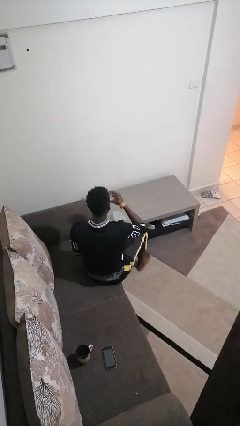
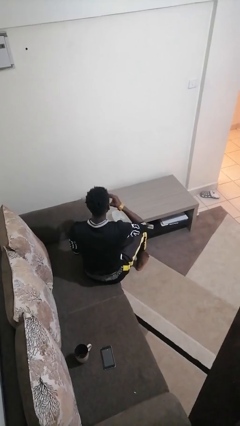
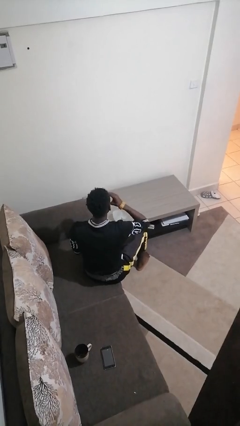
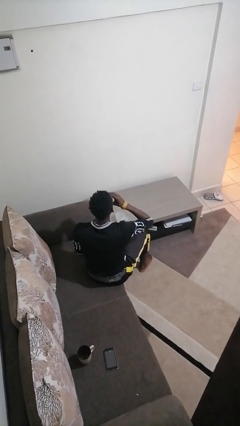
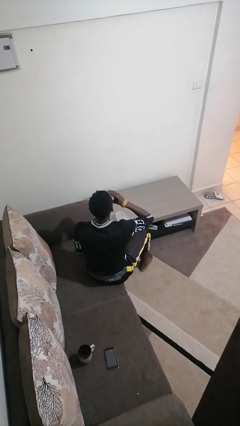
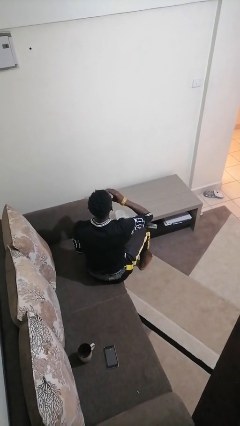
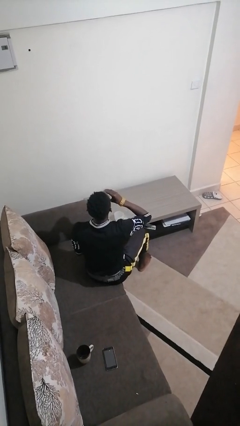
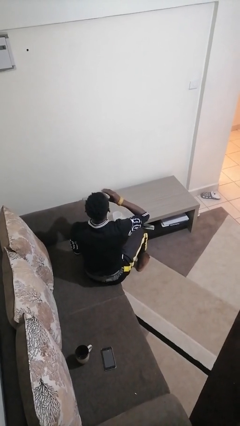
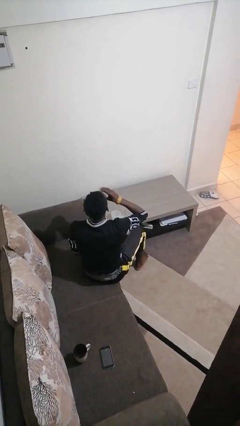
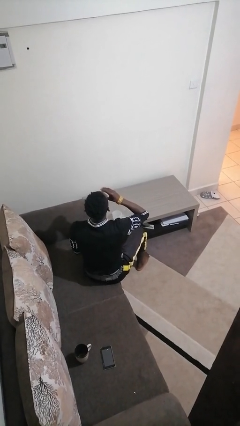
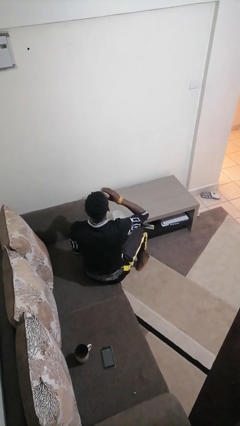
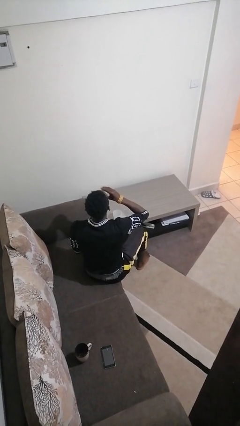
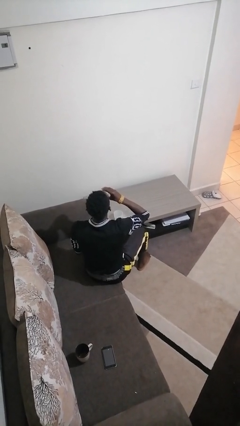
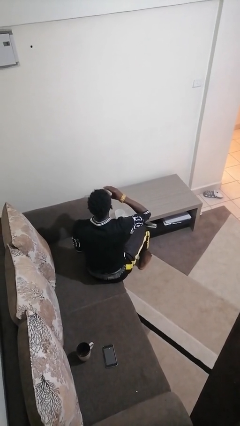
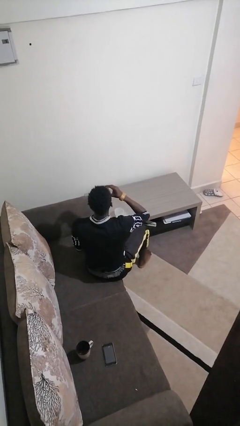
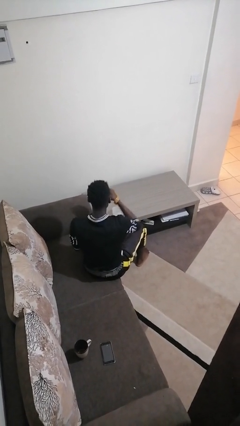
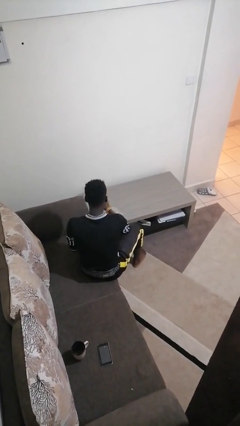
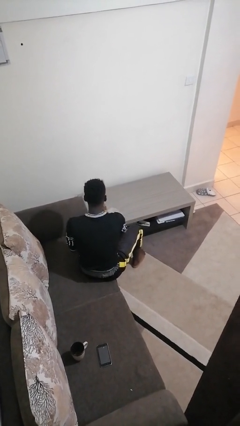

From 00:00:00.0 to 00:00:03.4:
person drinks from shotglass

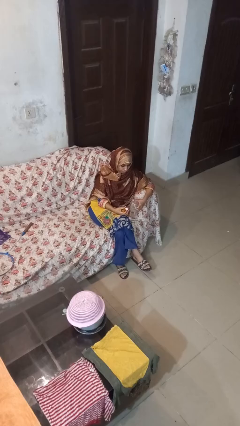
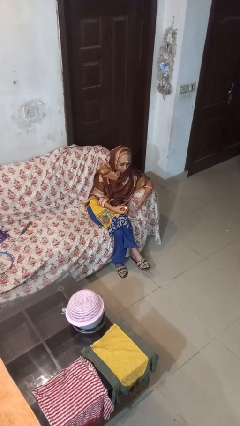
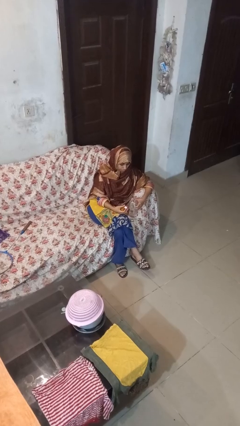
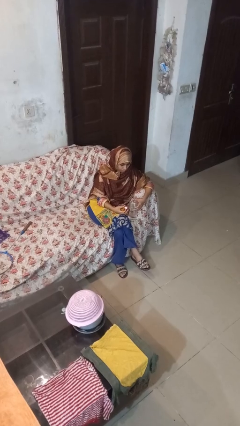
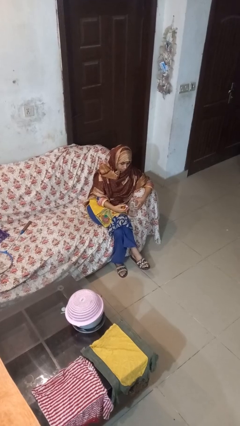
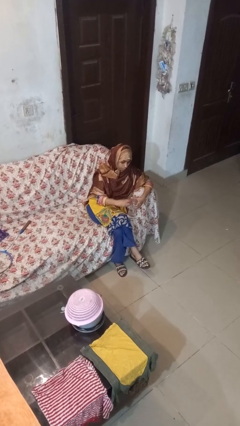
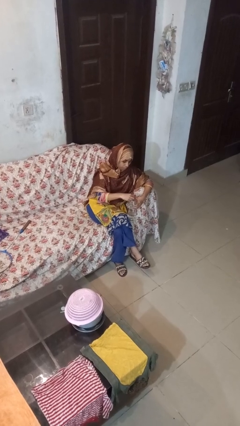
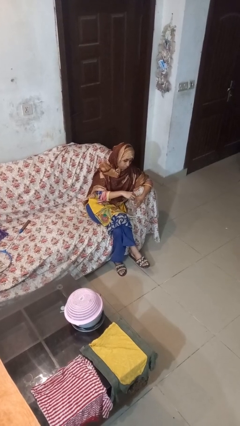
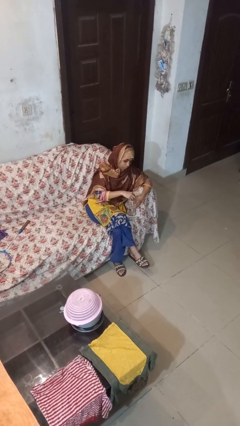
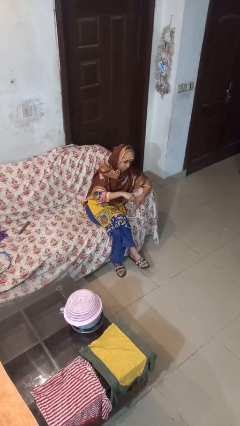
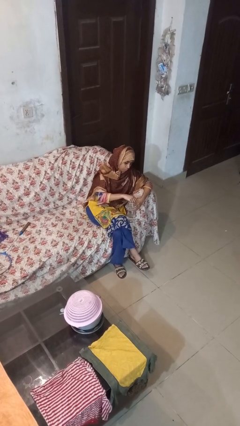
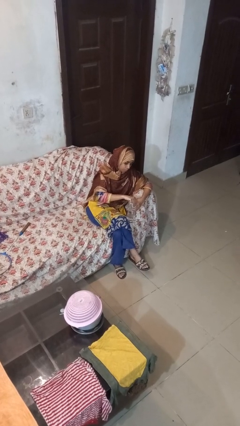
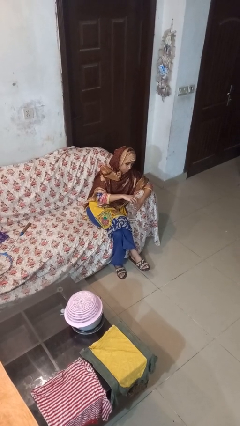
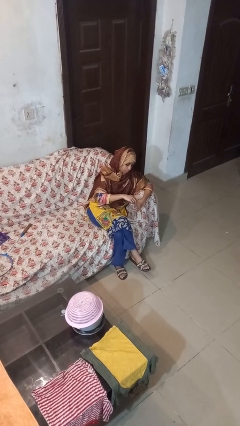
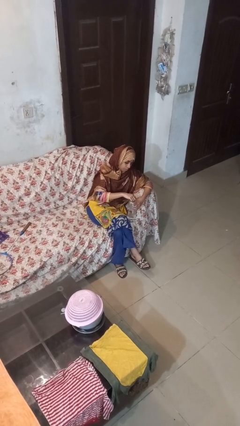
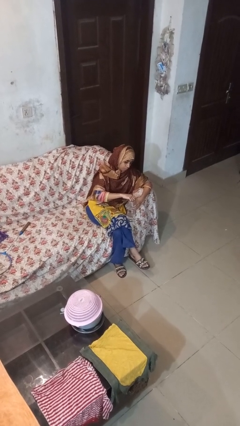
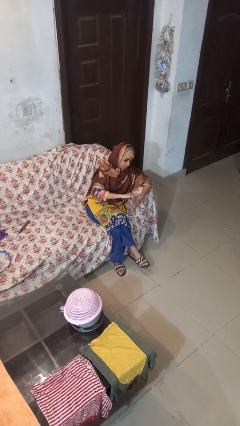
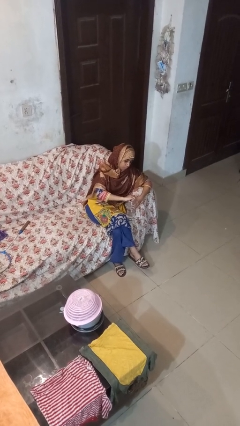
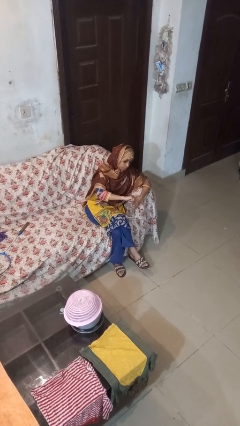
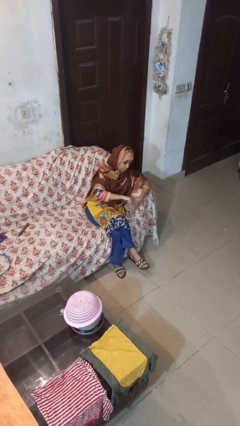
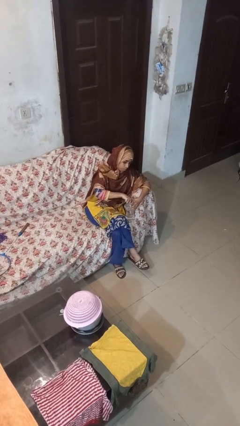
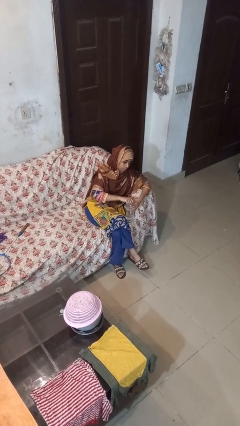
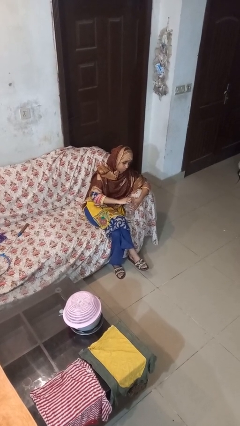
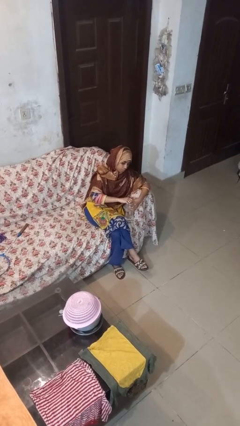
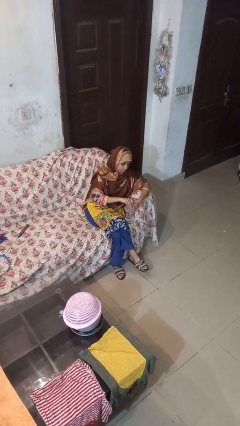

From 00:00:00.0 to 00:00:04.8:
person screws lid to bottle

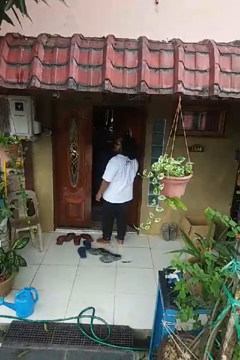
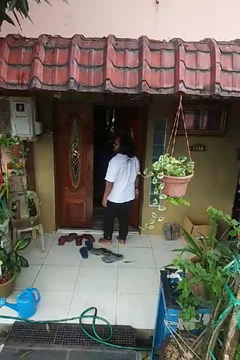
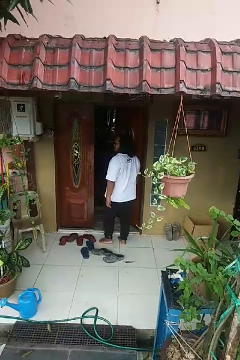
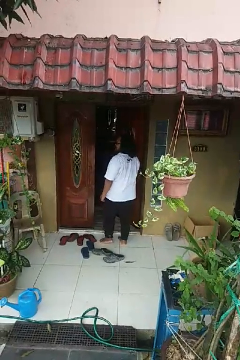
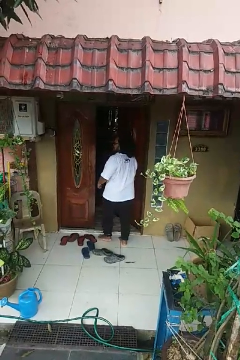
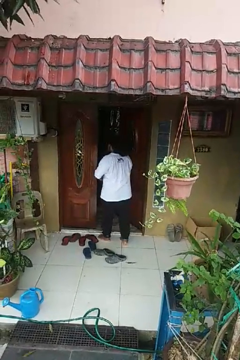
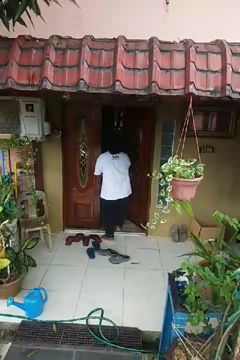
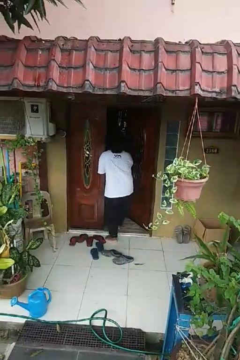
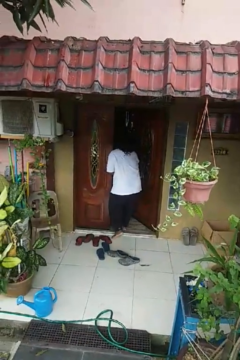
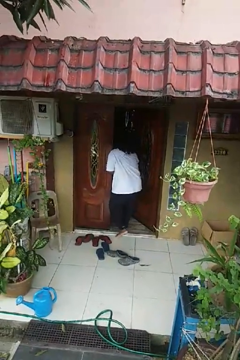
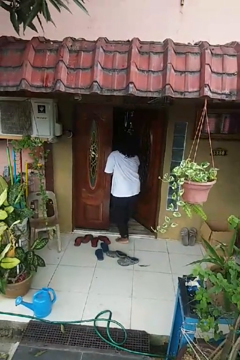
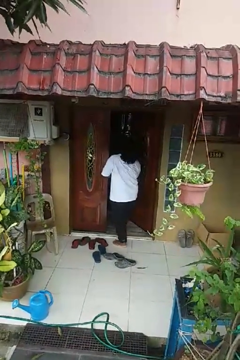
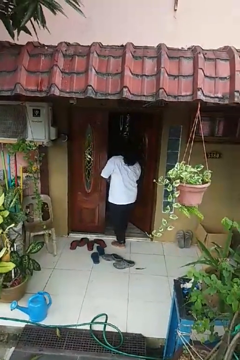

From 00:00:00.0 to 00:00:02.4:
person bumps into wall

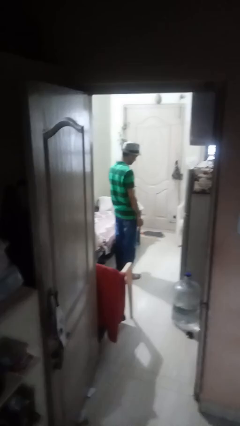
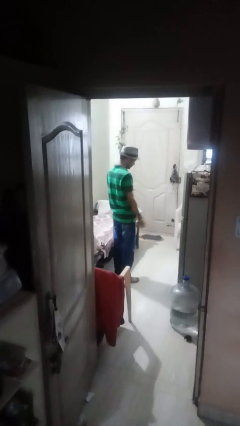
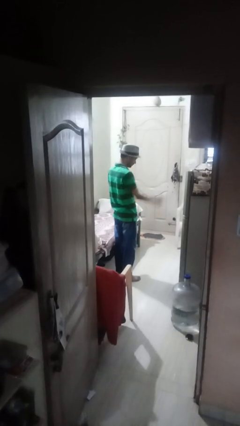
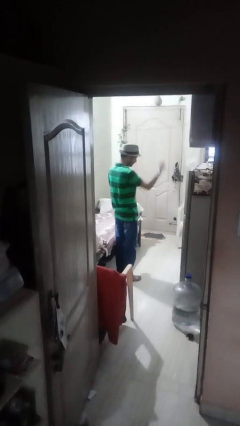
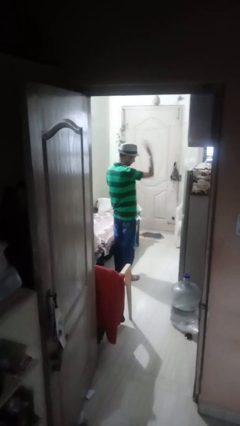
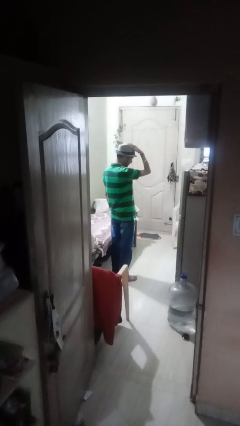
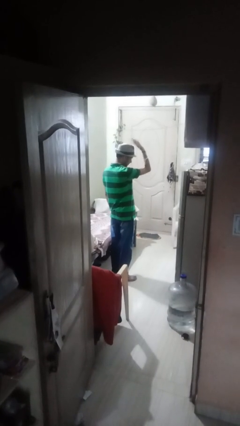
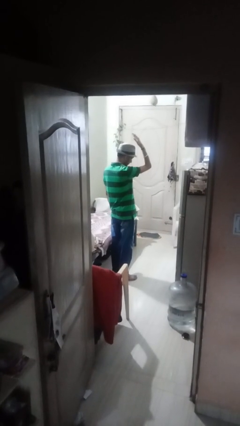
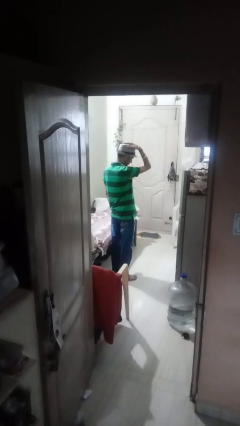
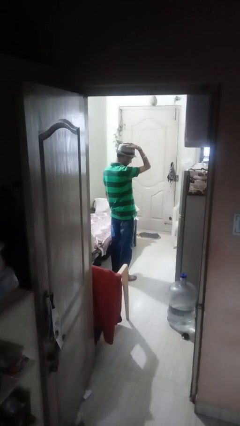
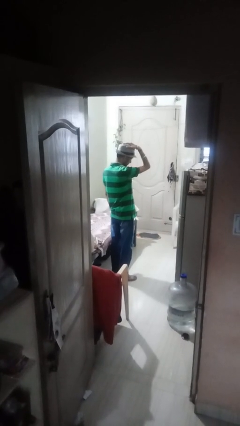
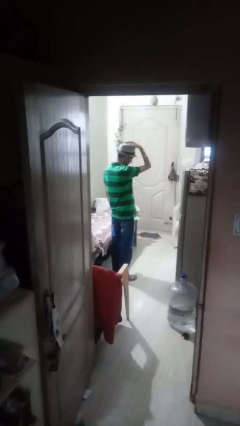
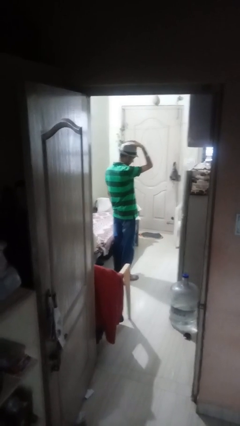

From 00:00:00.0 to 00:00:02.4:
person pats head

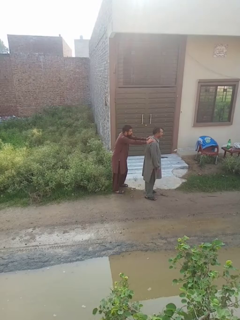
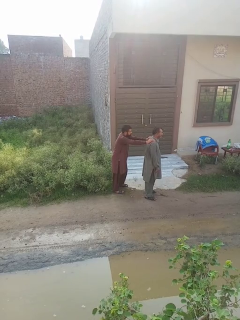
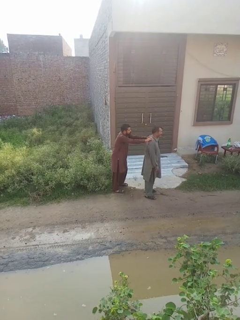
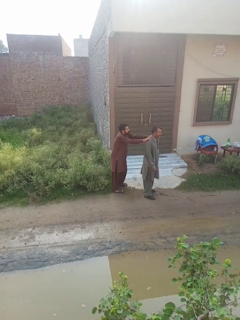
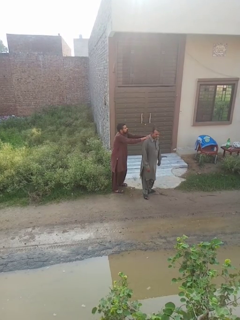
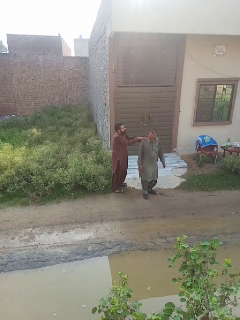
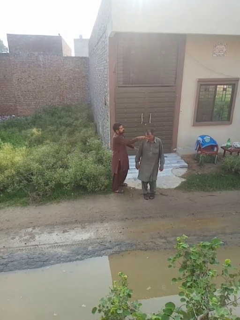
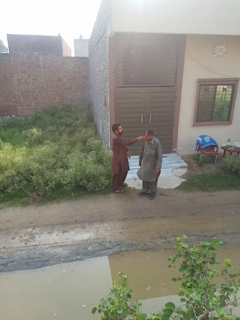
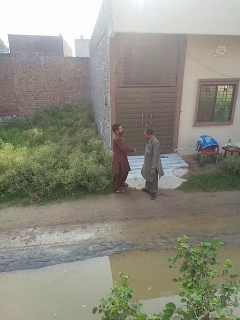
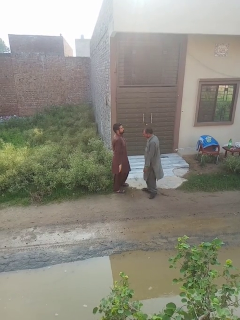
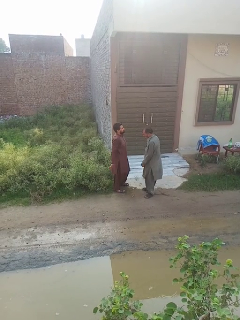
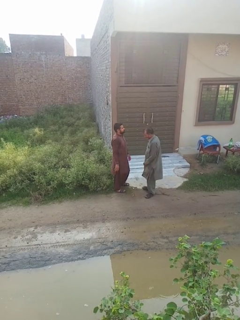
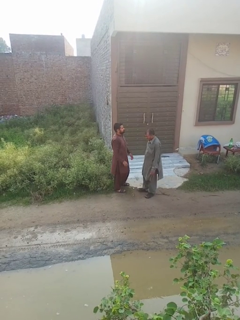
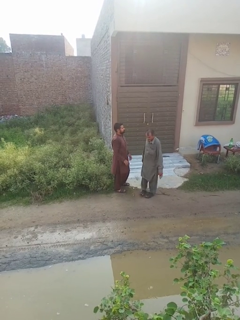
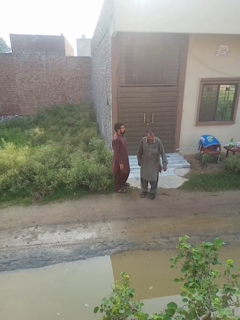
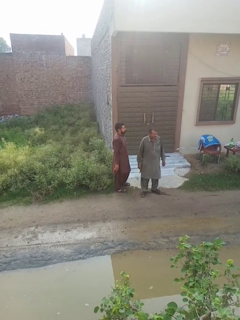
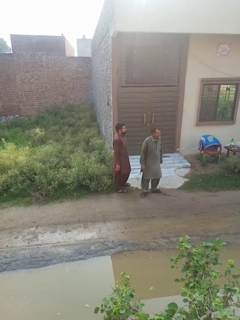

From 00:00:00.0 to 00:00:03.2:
person spins person around

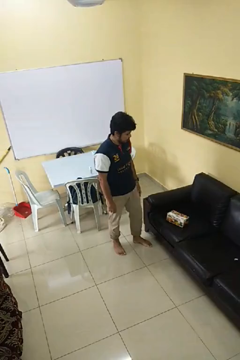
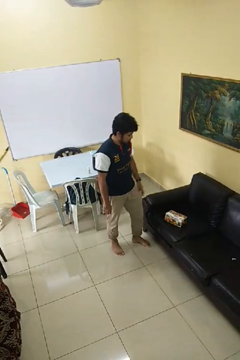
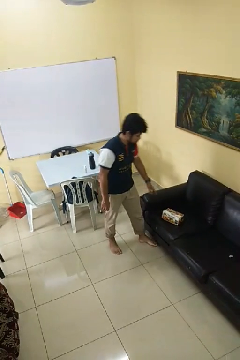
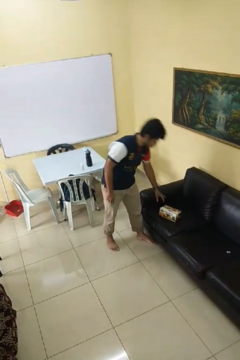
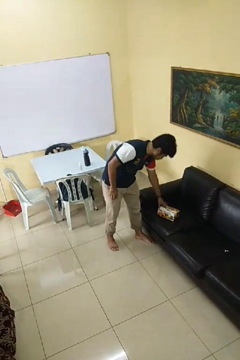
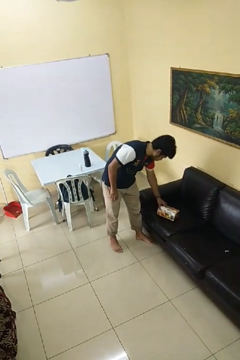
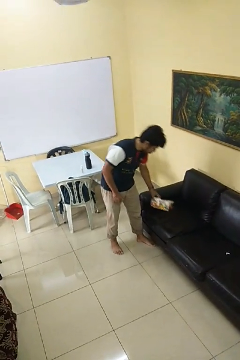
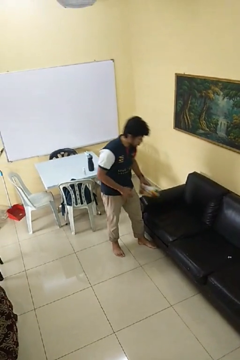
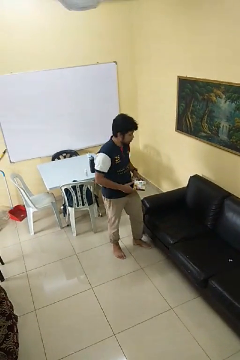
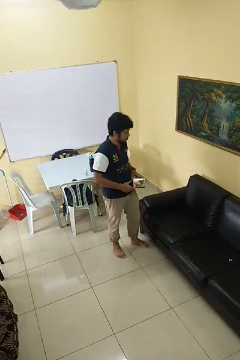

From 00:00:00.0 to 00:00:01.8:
person picks up object from couch

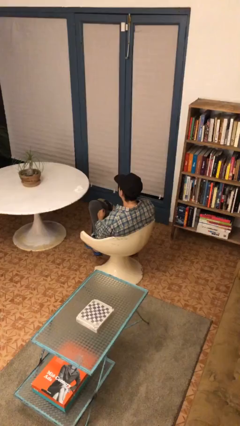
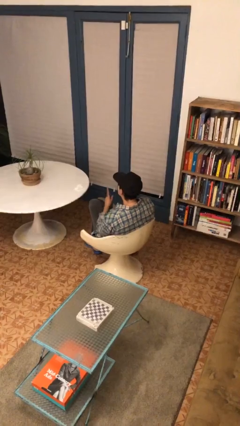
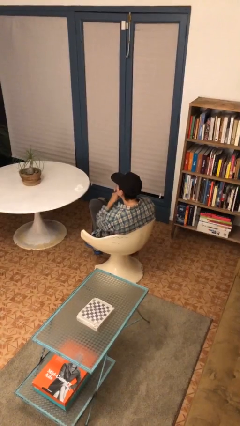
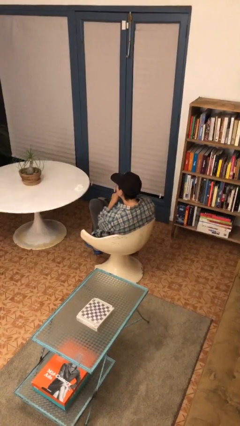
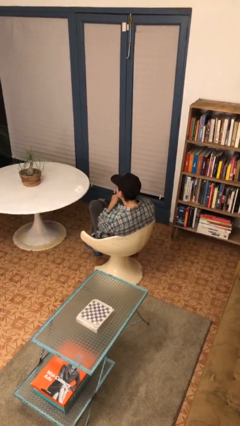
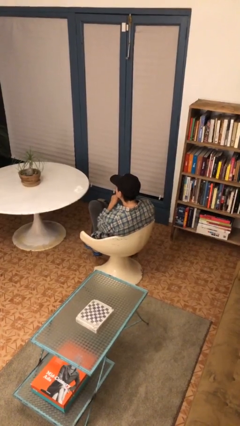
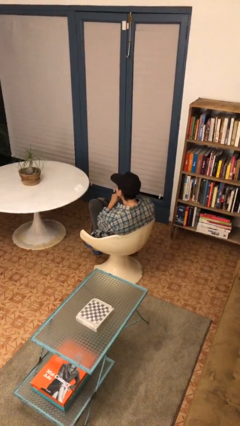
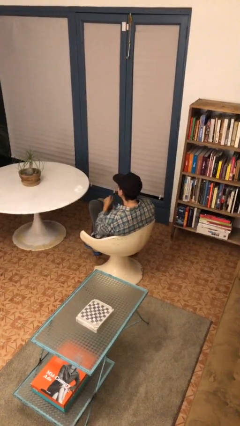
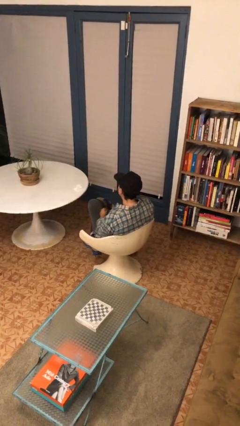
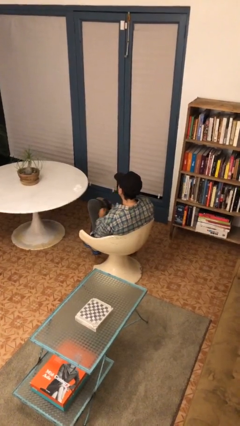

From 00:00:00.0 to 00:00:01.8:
person gestures be quiet
